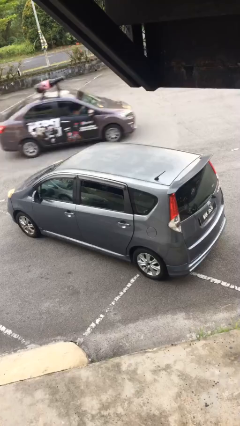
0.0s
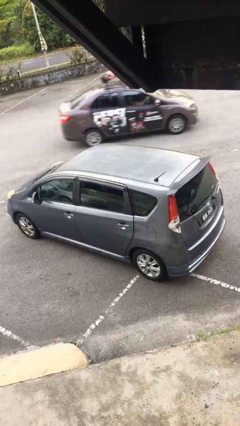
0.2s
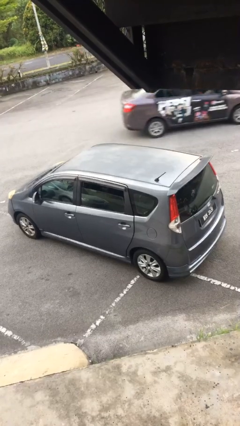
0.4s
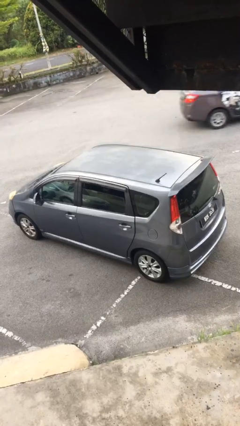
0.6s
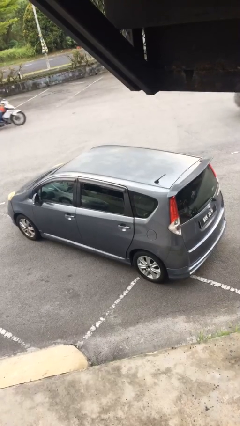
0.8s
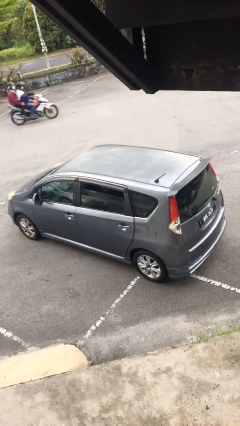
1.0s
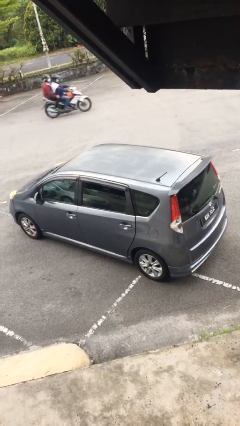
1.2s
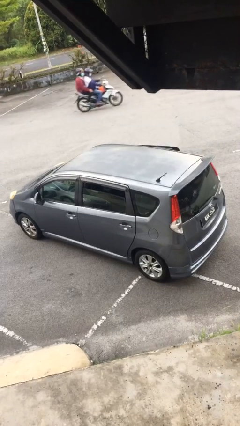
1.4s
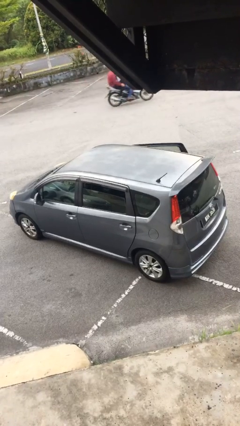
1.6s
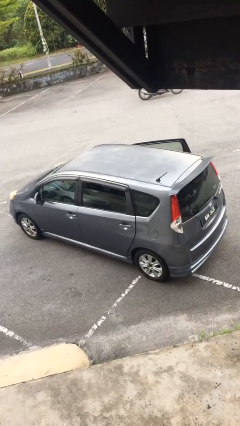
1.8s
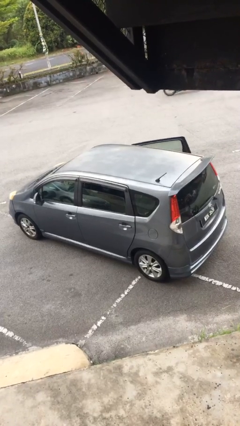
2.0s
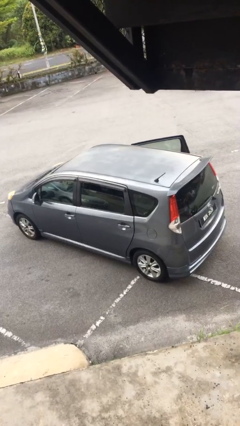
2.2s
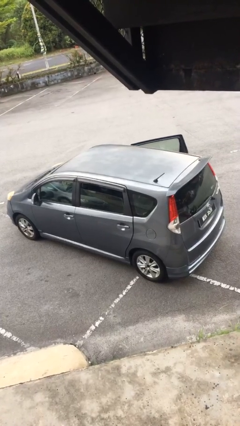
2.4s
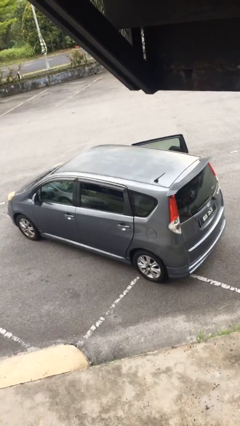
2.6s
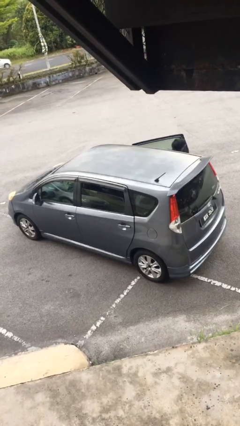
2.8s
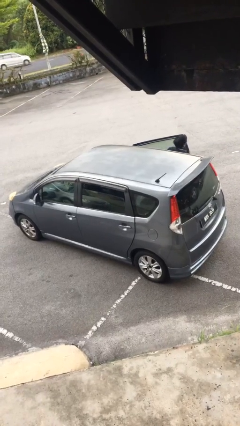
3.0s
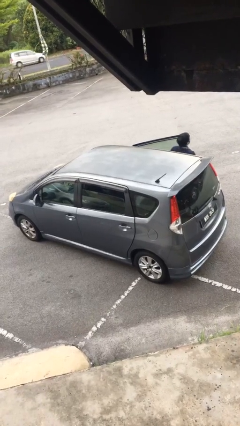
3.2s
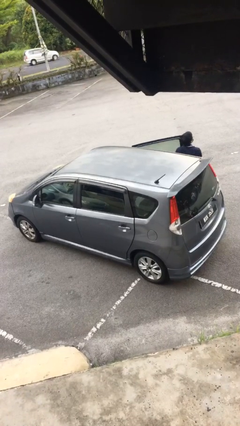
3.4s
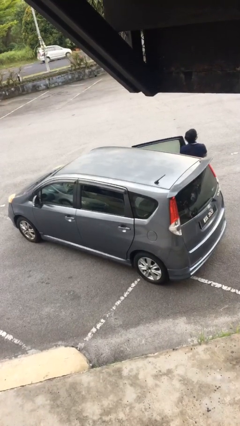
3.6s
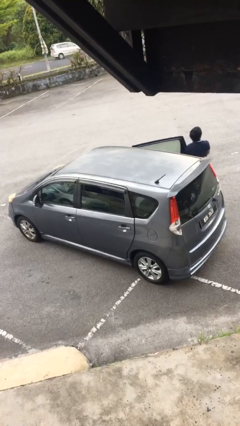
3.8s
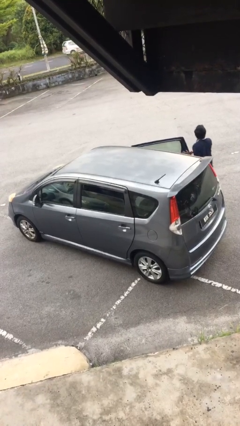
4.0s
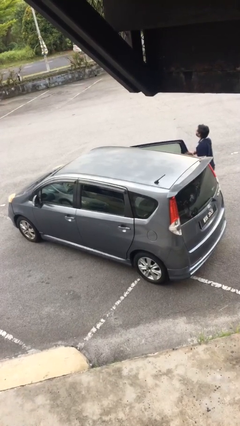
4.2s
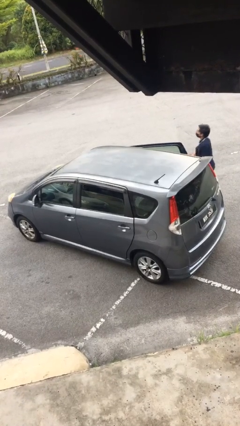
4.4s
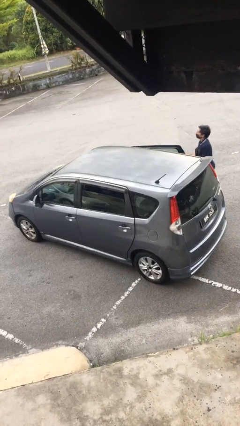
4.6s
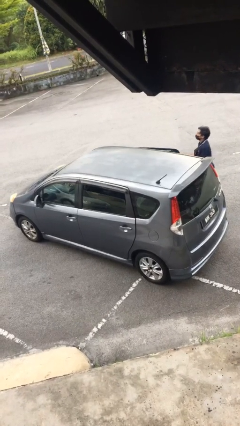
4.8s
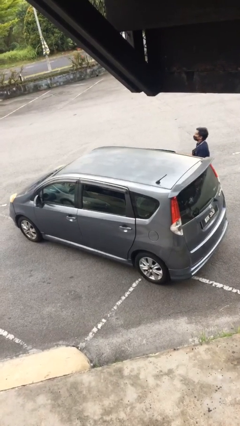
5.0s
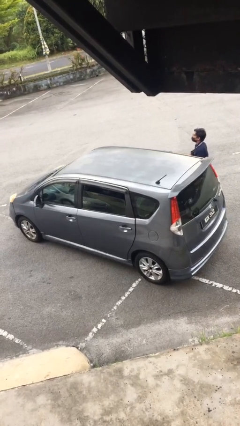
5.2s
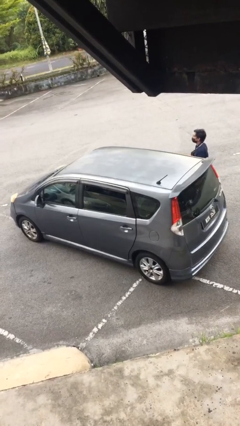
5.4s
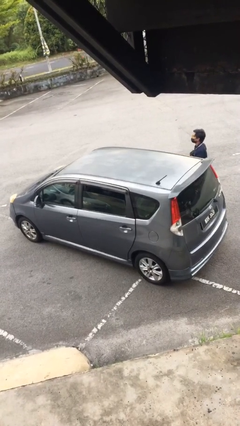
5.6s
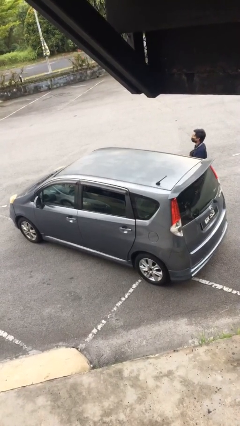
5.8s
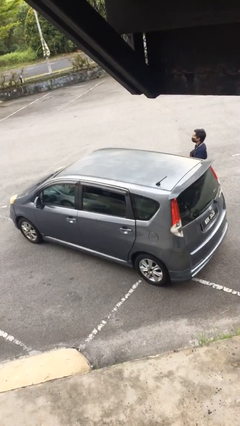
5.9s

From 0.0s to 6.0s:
car drops off person

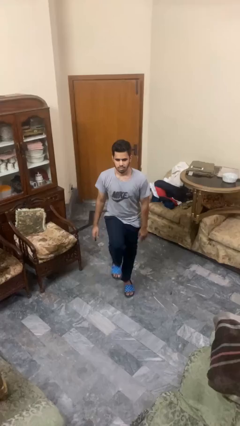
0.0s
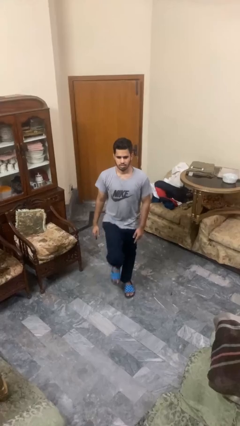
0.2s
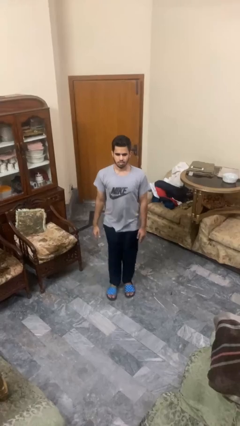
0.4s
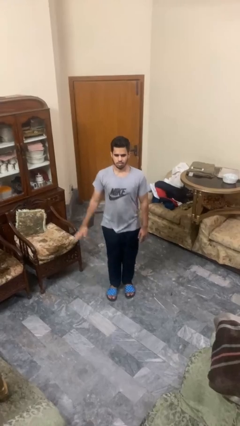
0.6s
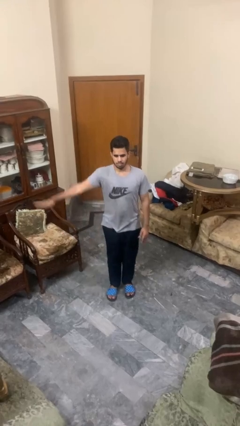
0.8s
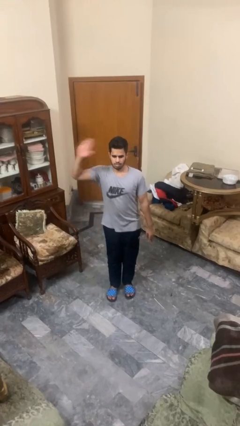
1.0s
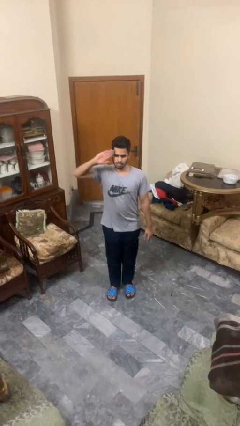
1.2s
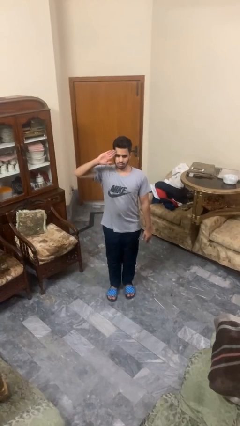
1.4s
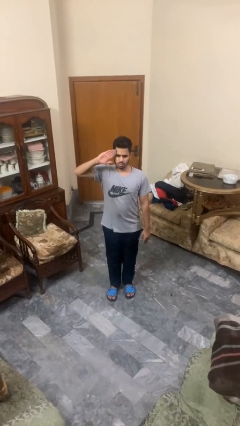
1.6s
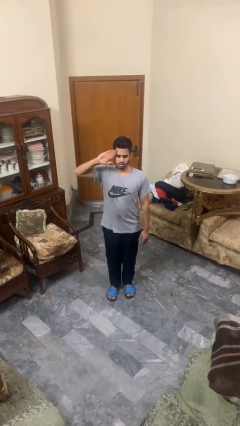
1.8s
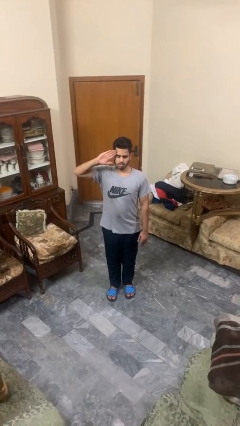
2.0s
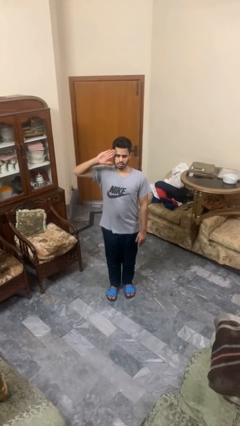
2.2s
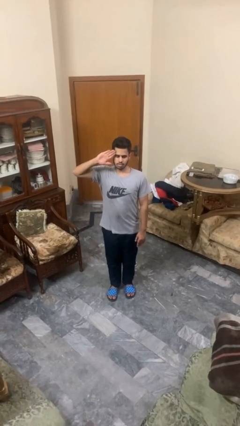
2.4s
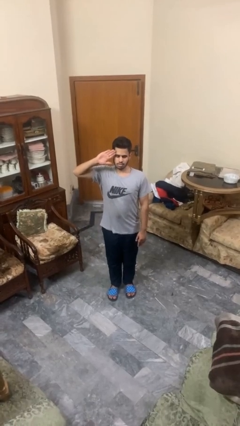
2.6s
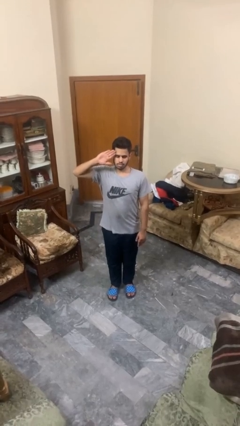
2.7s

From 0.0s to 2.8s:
person salutes

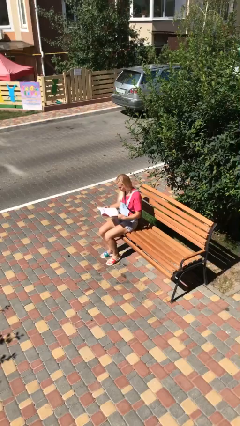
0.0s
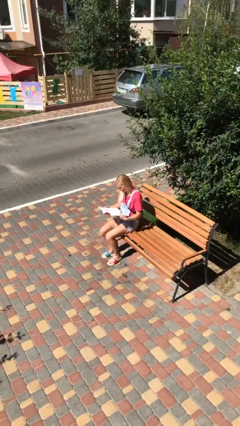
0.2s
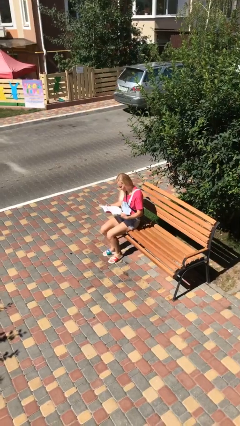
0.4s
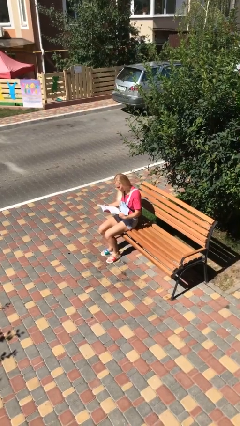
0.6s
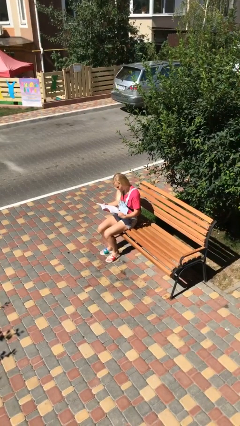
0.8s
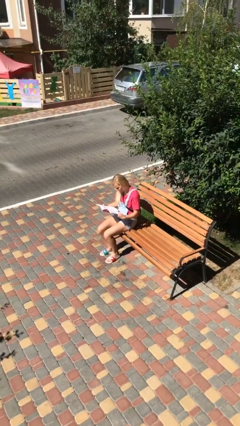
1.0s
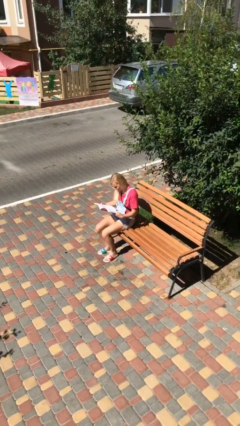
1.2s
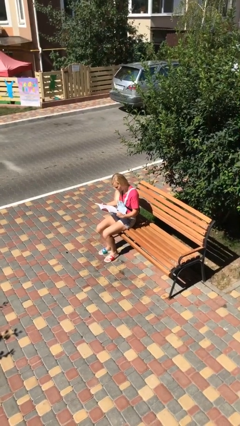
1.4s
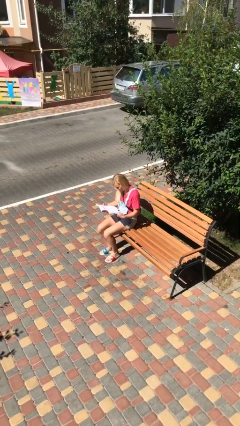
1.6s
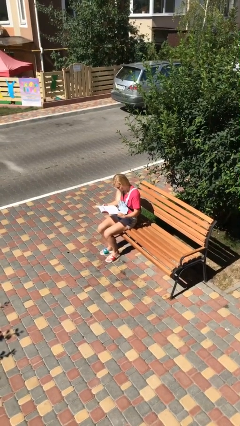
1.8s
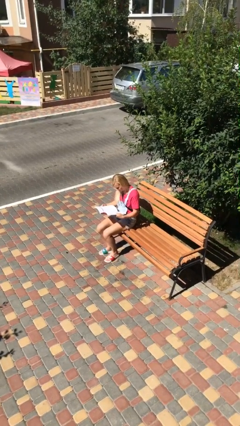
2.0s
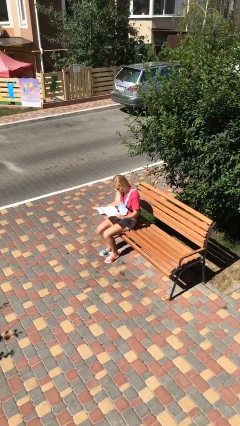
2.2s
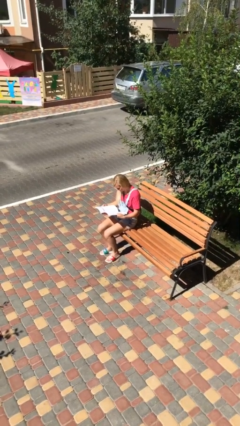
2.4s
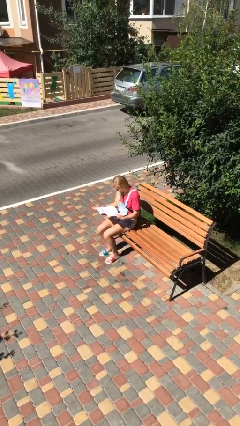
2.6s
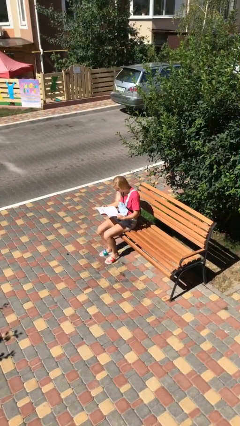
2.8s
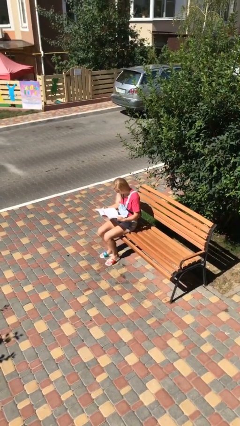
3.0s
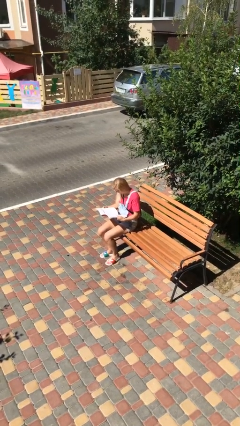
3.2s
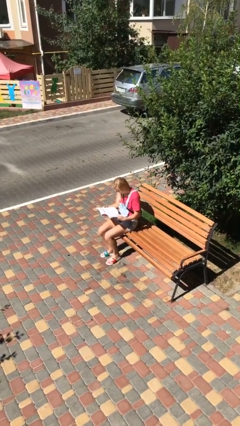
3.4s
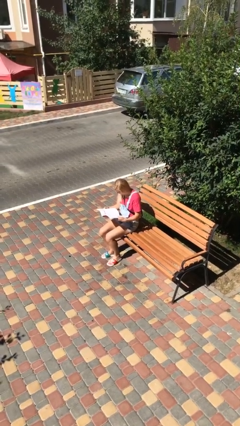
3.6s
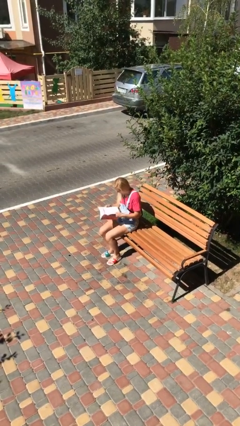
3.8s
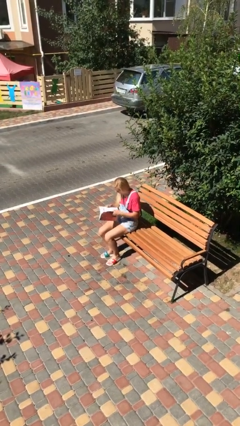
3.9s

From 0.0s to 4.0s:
person reads document

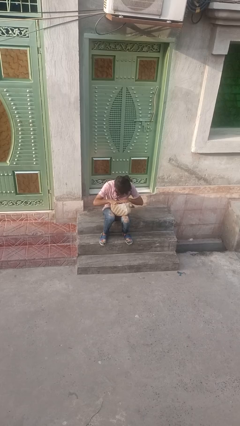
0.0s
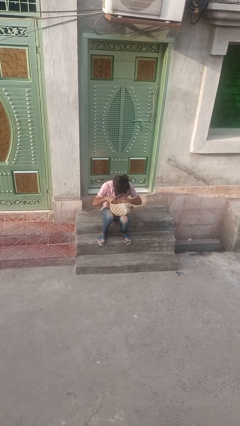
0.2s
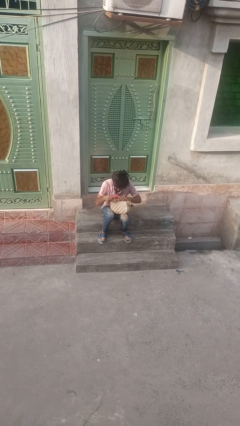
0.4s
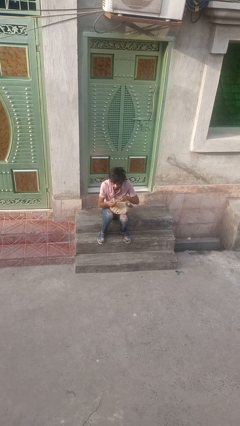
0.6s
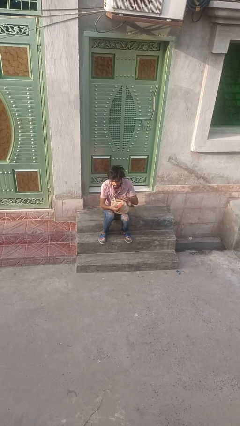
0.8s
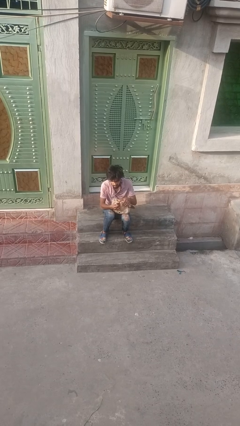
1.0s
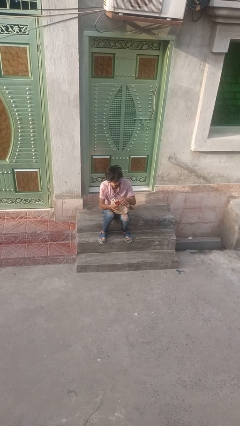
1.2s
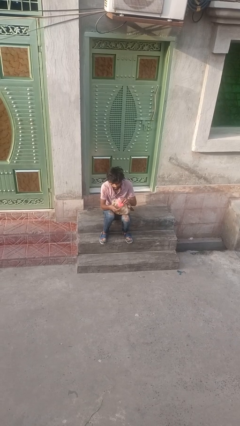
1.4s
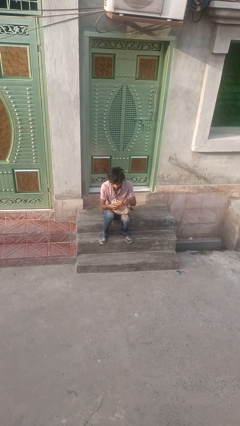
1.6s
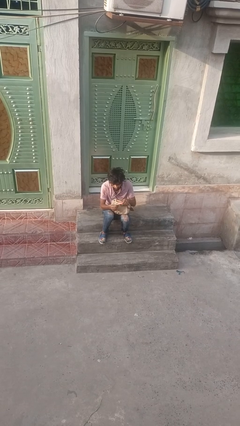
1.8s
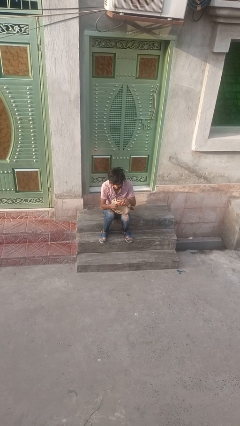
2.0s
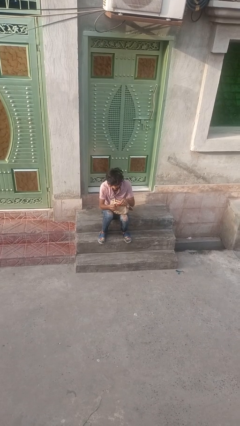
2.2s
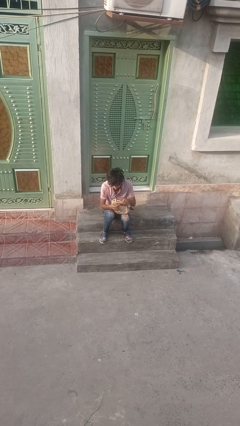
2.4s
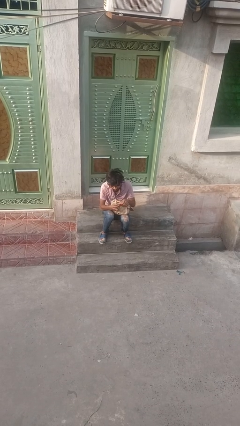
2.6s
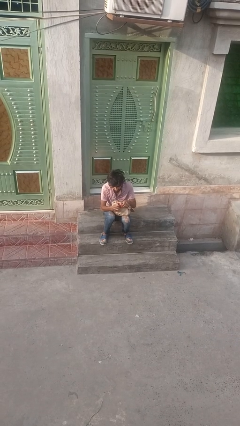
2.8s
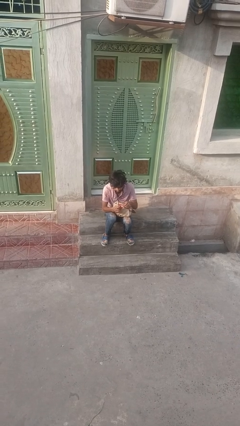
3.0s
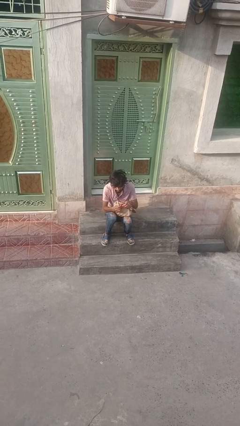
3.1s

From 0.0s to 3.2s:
person takes object from backpack

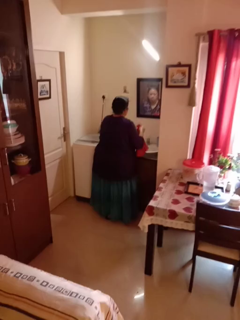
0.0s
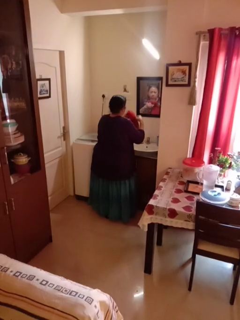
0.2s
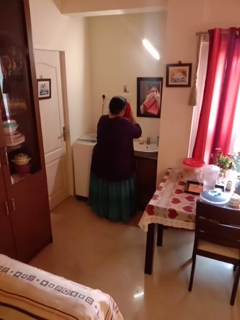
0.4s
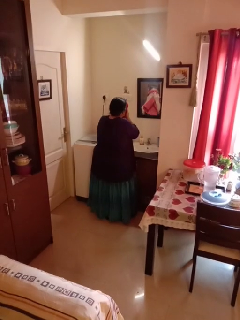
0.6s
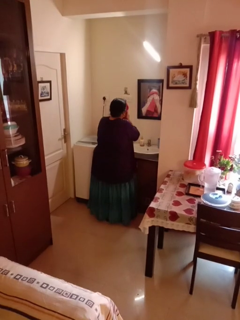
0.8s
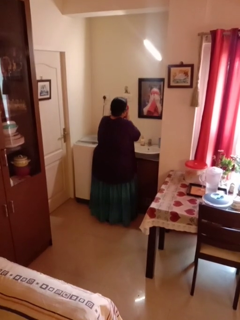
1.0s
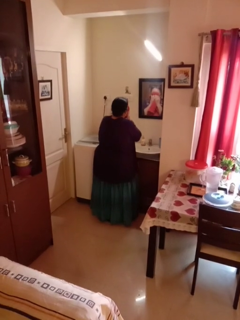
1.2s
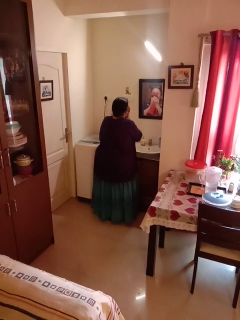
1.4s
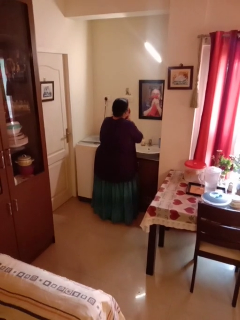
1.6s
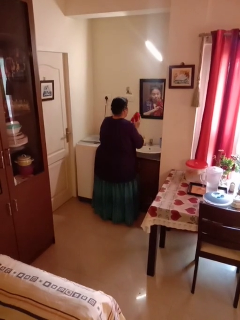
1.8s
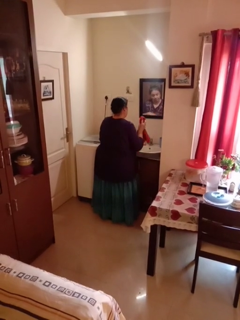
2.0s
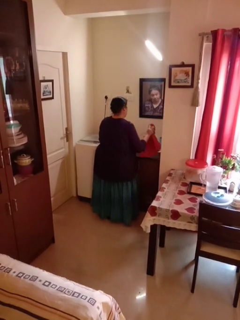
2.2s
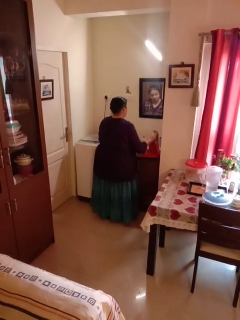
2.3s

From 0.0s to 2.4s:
person dries face with towel
